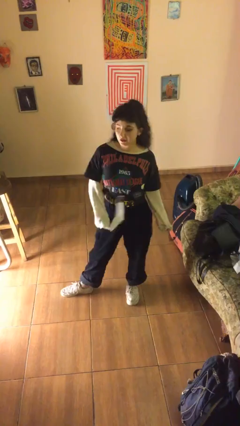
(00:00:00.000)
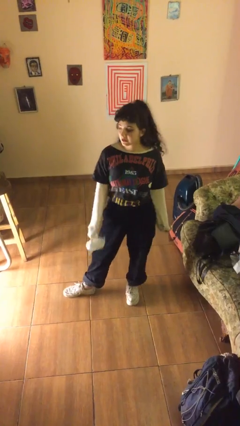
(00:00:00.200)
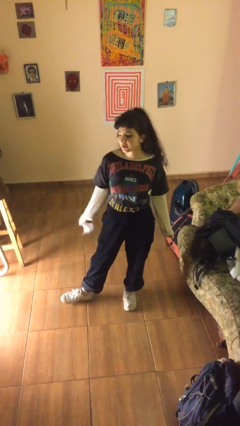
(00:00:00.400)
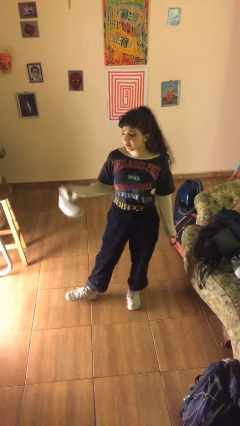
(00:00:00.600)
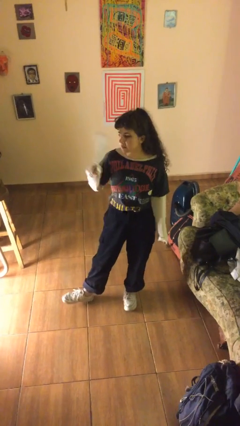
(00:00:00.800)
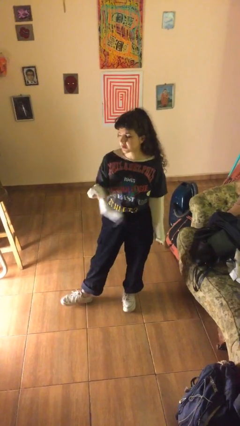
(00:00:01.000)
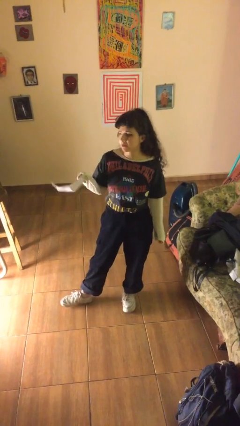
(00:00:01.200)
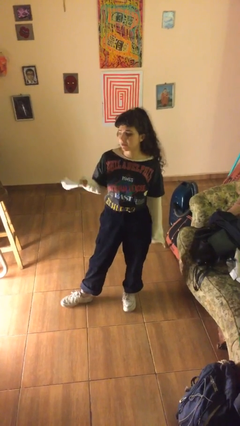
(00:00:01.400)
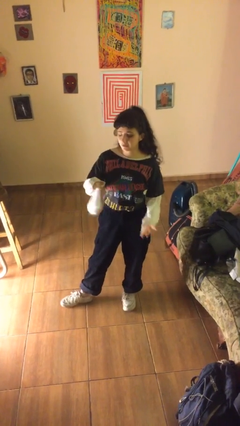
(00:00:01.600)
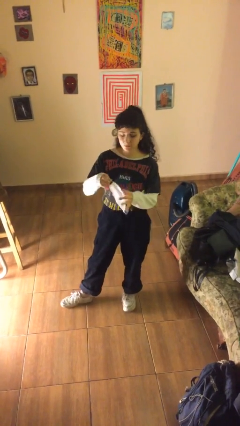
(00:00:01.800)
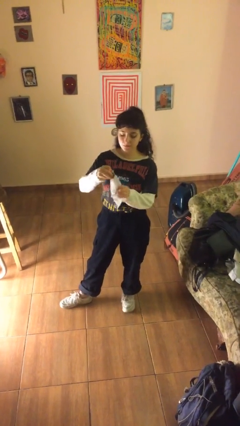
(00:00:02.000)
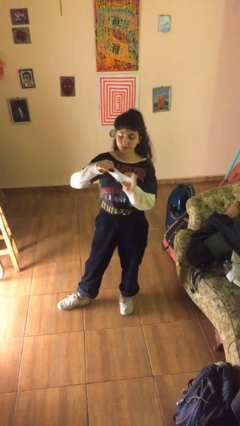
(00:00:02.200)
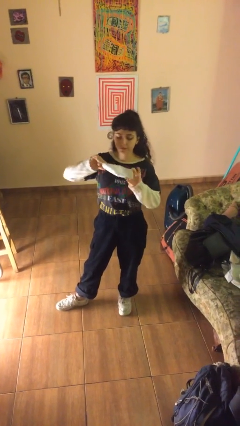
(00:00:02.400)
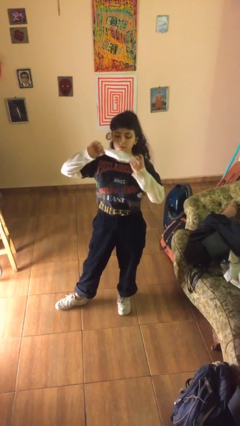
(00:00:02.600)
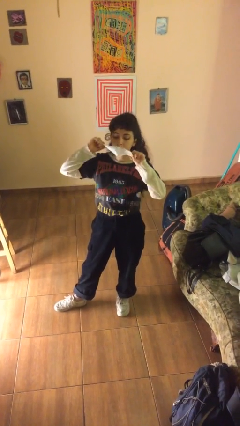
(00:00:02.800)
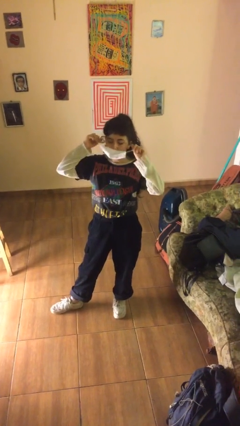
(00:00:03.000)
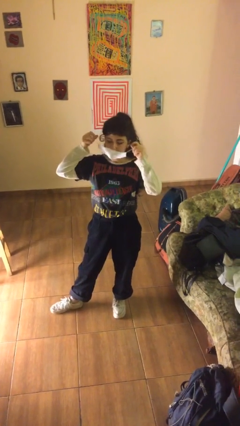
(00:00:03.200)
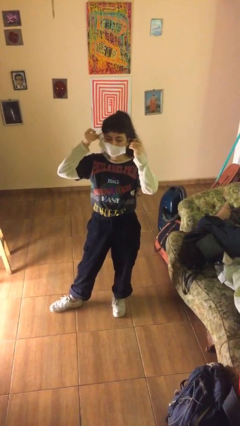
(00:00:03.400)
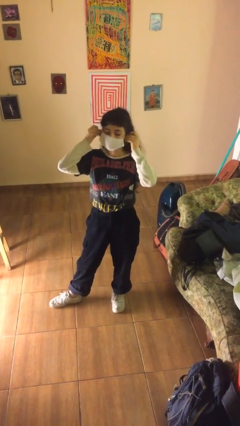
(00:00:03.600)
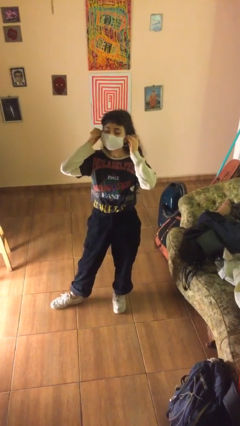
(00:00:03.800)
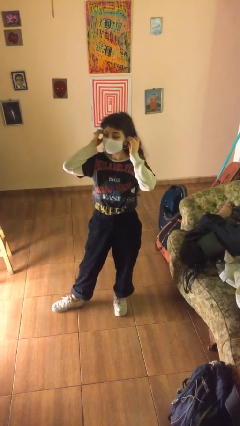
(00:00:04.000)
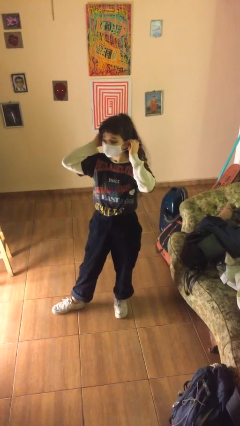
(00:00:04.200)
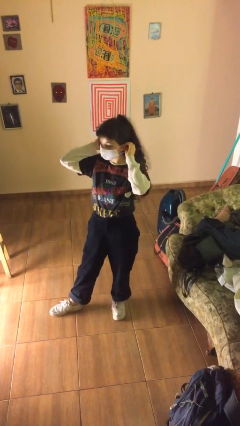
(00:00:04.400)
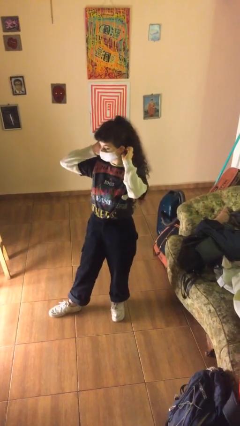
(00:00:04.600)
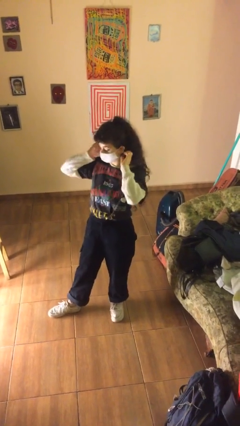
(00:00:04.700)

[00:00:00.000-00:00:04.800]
person puts on facemask

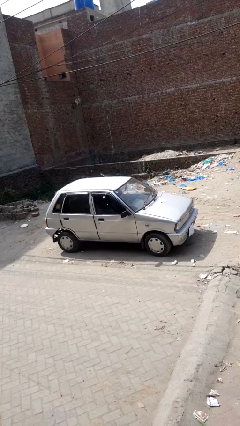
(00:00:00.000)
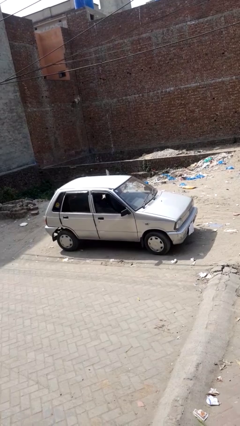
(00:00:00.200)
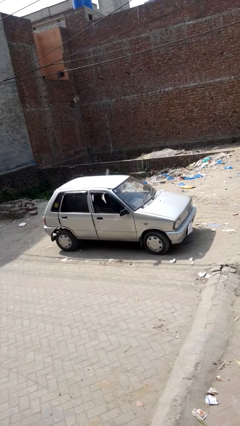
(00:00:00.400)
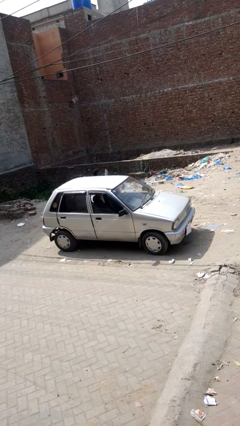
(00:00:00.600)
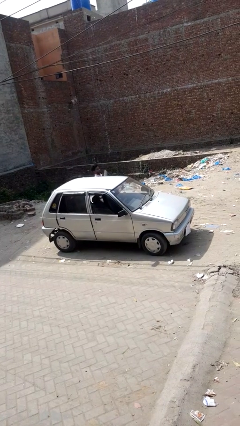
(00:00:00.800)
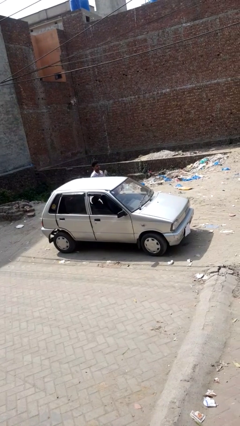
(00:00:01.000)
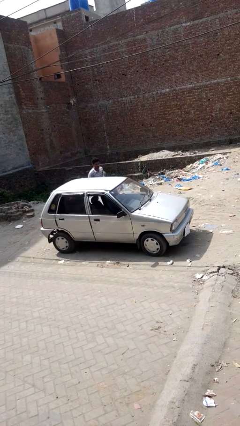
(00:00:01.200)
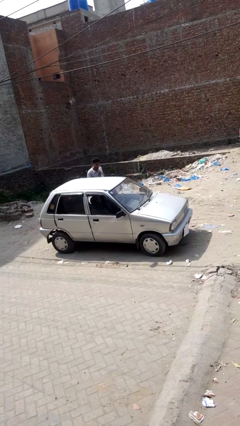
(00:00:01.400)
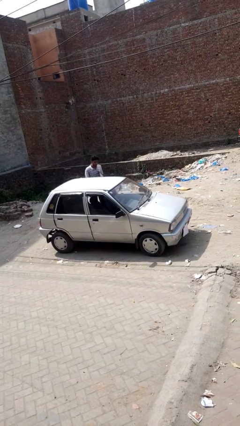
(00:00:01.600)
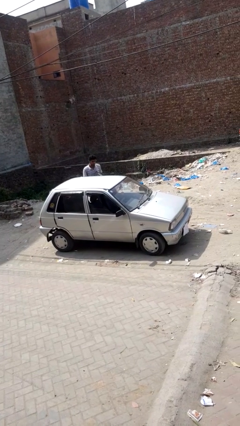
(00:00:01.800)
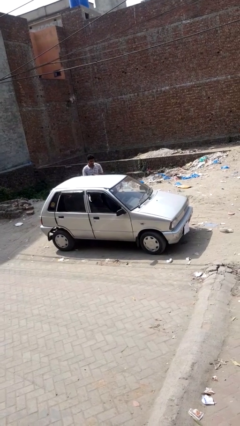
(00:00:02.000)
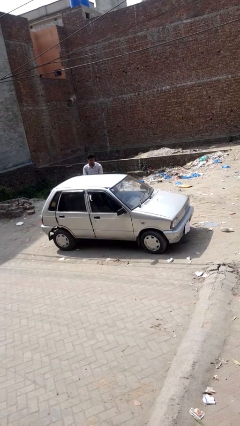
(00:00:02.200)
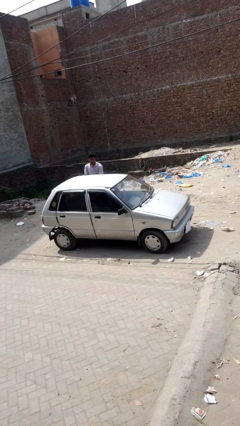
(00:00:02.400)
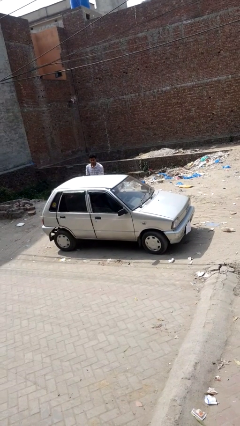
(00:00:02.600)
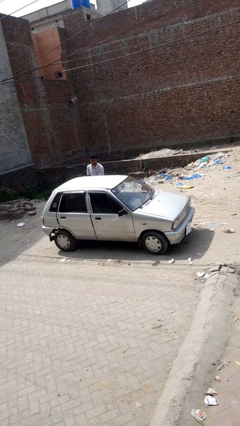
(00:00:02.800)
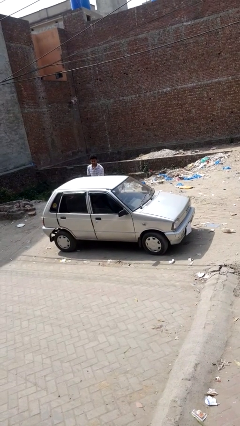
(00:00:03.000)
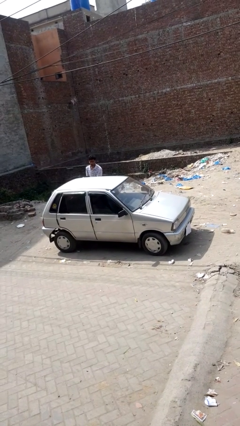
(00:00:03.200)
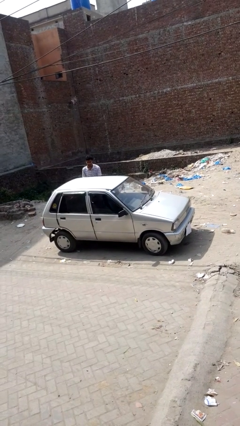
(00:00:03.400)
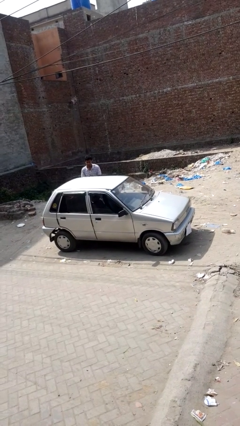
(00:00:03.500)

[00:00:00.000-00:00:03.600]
car drops off person

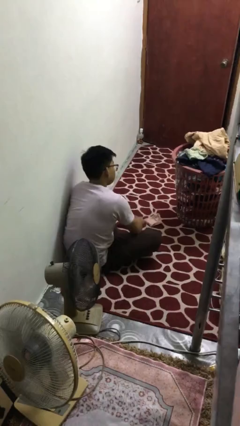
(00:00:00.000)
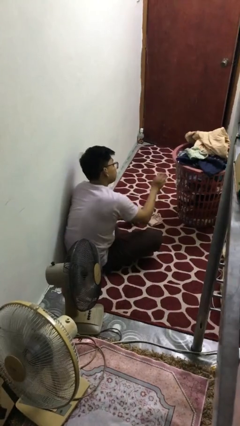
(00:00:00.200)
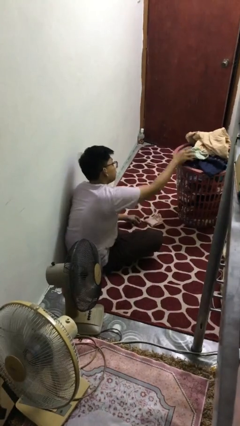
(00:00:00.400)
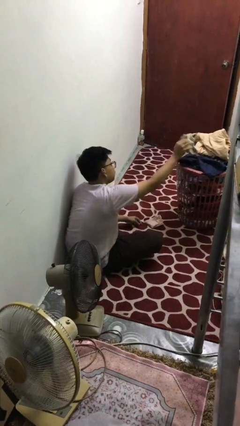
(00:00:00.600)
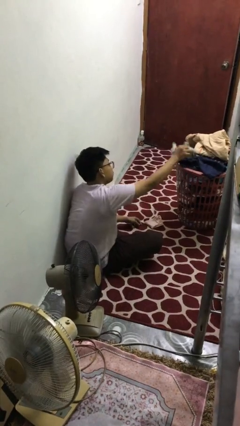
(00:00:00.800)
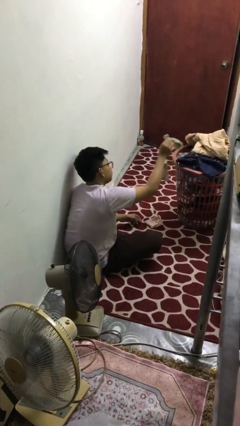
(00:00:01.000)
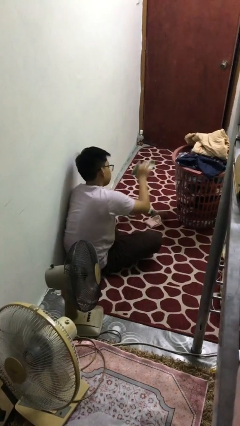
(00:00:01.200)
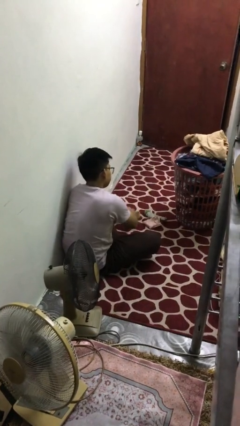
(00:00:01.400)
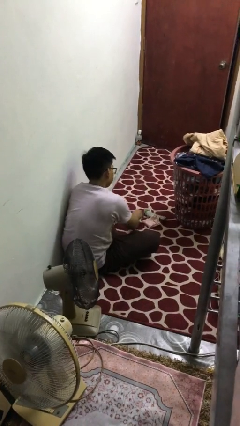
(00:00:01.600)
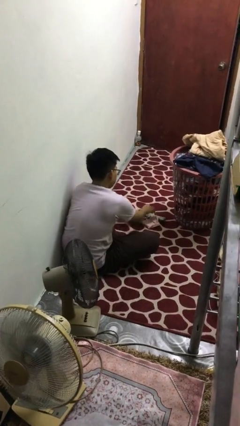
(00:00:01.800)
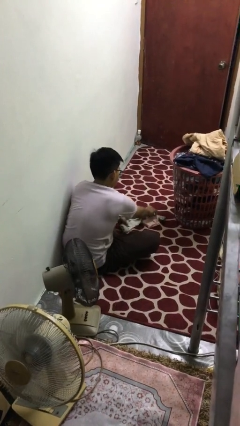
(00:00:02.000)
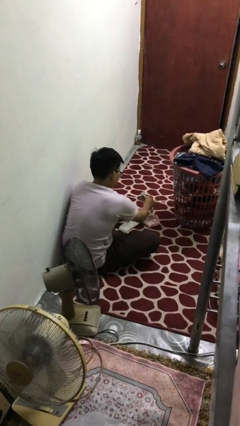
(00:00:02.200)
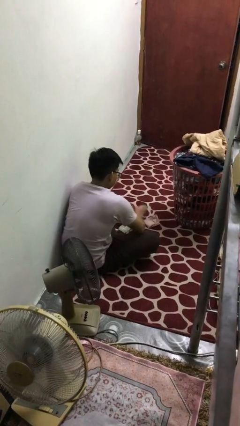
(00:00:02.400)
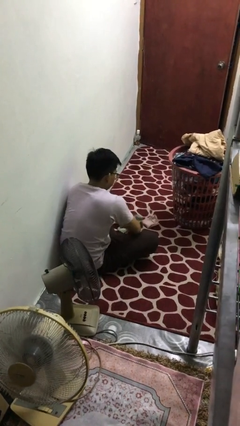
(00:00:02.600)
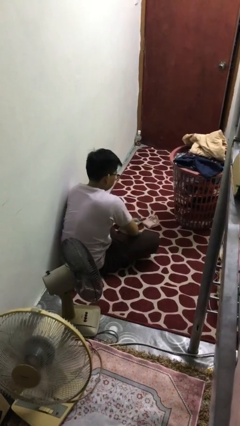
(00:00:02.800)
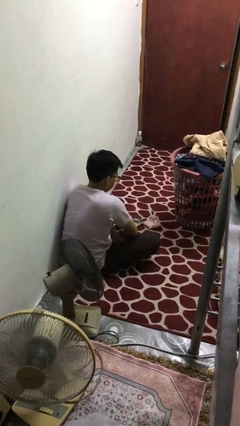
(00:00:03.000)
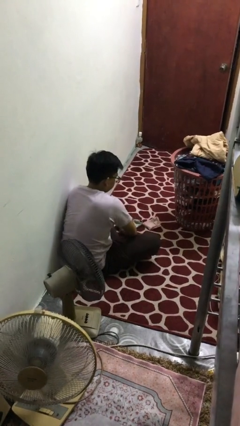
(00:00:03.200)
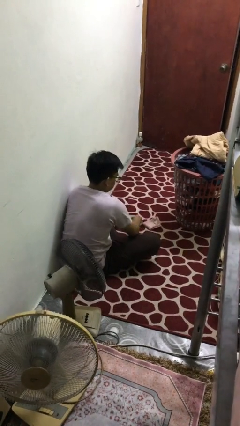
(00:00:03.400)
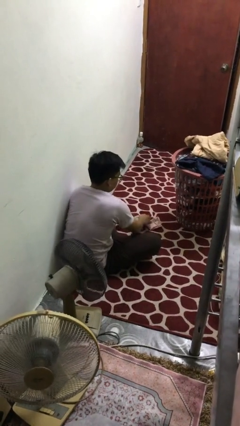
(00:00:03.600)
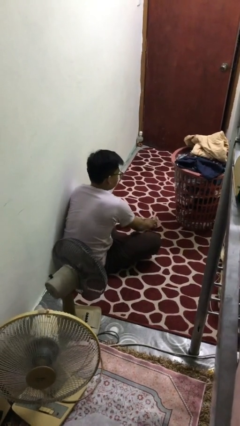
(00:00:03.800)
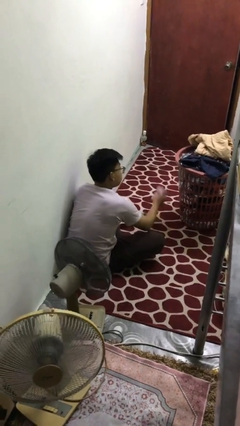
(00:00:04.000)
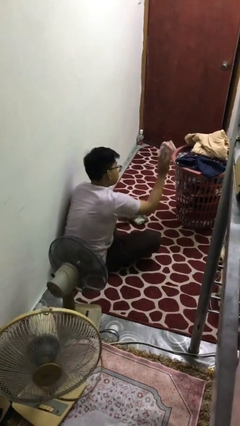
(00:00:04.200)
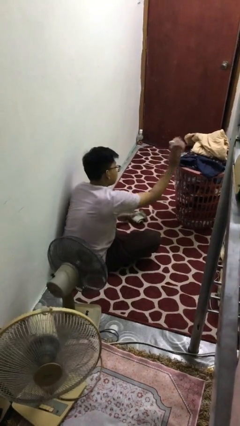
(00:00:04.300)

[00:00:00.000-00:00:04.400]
person folds socks

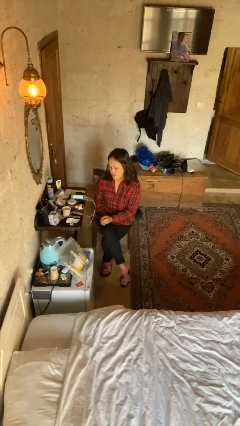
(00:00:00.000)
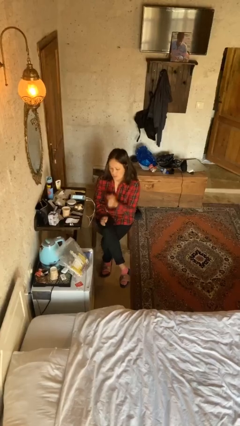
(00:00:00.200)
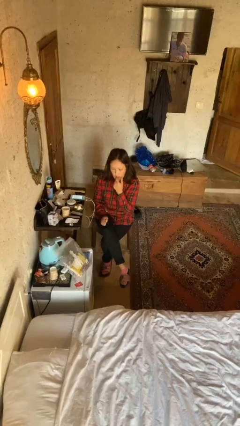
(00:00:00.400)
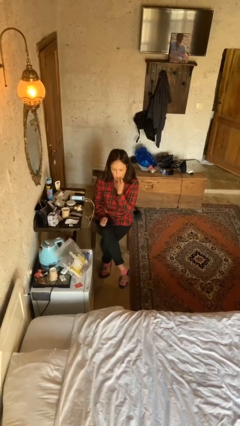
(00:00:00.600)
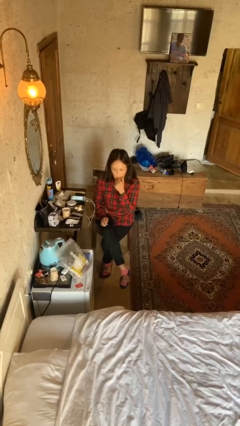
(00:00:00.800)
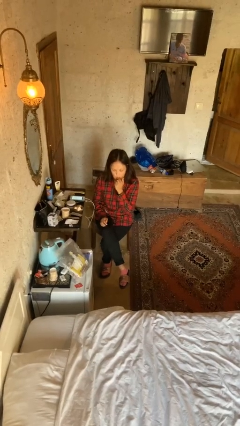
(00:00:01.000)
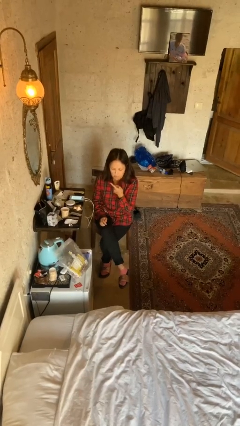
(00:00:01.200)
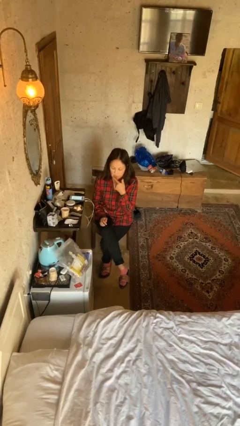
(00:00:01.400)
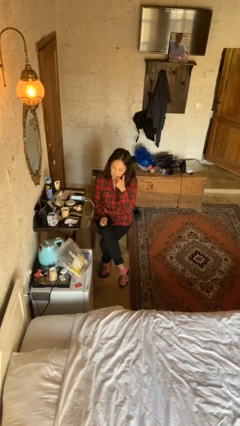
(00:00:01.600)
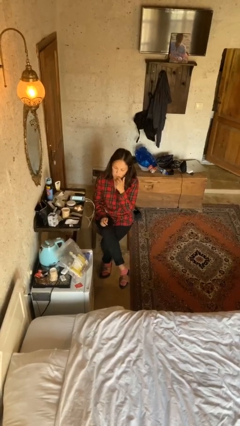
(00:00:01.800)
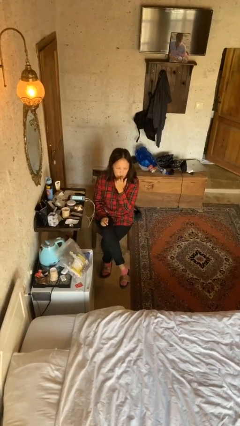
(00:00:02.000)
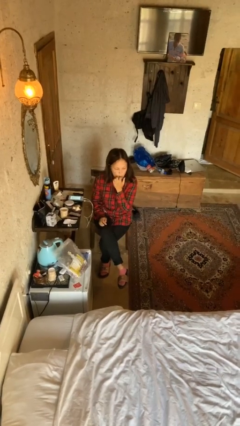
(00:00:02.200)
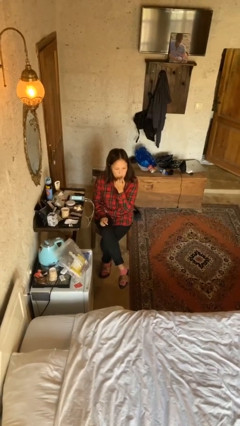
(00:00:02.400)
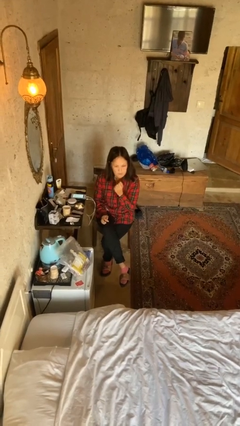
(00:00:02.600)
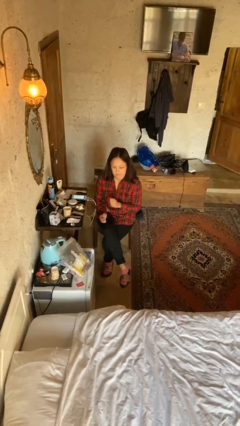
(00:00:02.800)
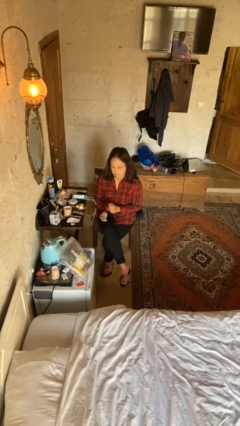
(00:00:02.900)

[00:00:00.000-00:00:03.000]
person licks fingers

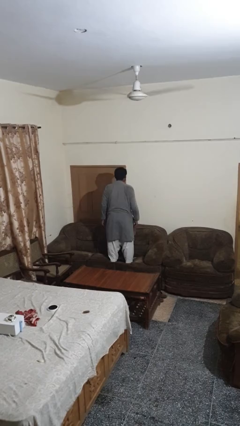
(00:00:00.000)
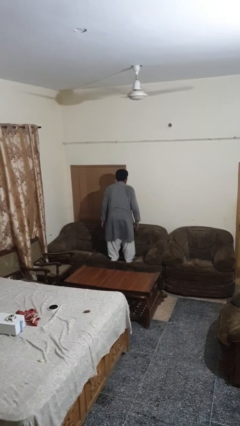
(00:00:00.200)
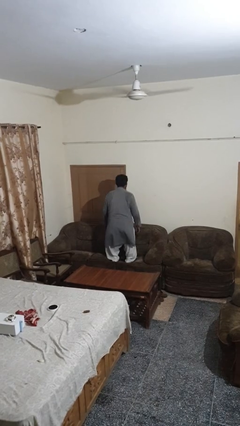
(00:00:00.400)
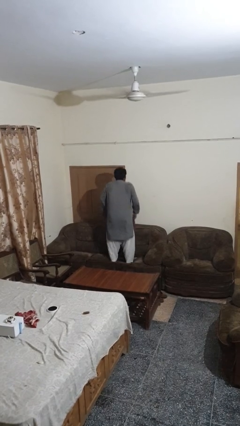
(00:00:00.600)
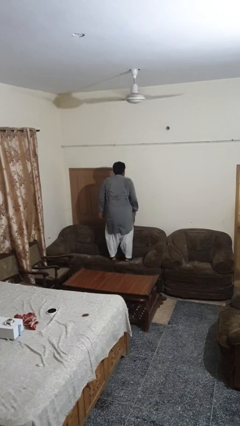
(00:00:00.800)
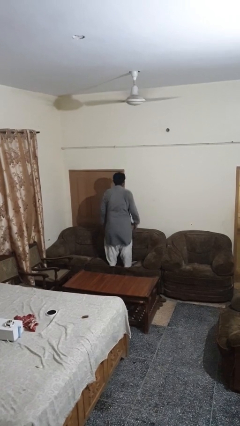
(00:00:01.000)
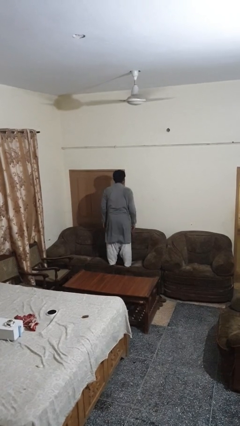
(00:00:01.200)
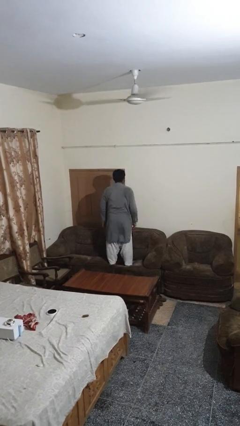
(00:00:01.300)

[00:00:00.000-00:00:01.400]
person jumps on couch
